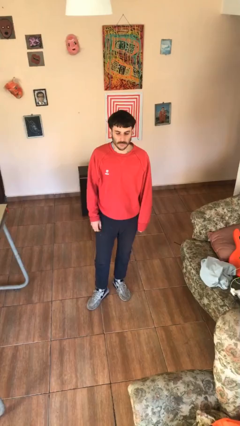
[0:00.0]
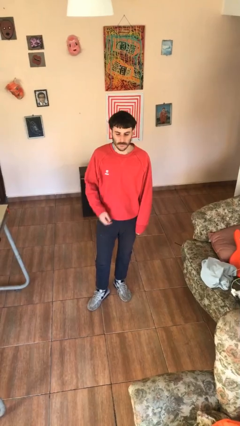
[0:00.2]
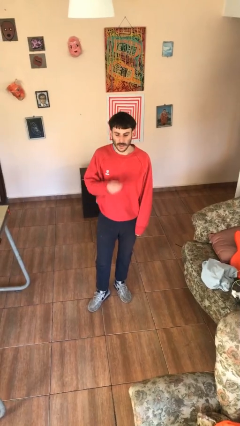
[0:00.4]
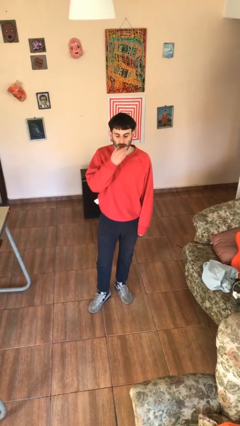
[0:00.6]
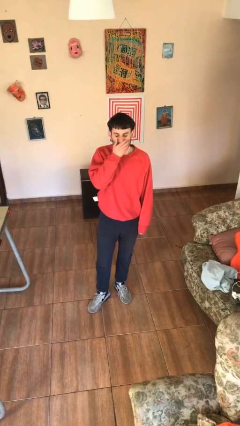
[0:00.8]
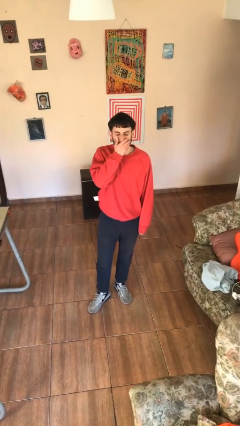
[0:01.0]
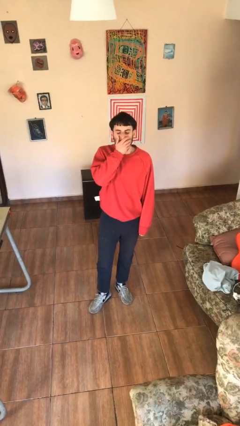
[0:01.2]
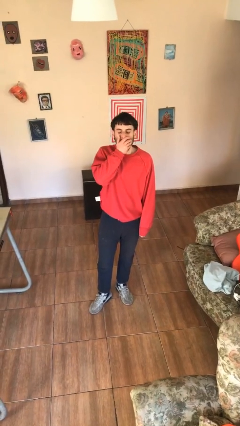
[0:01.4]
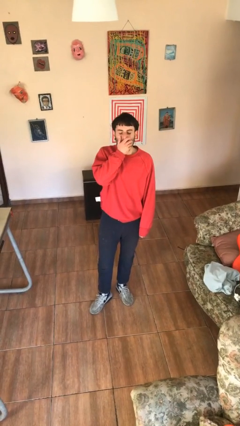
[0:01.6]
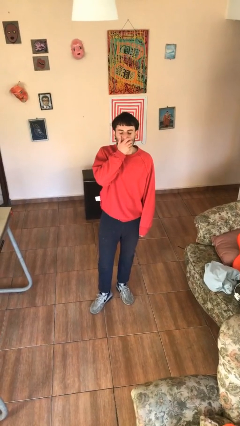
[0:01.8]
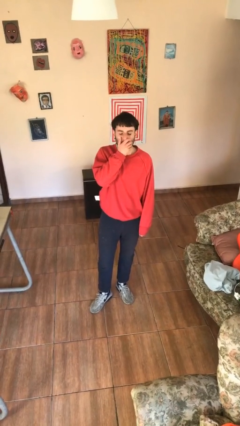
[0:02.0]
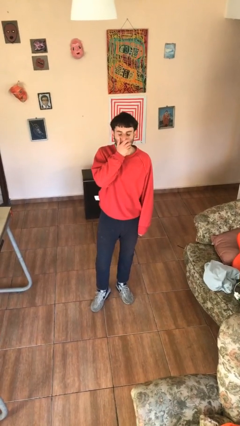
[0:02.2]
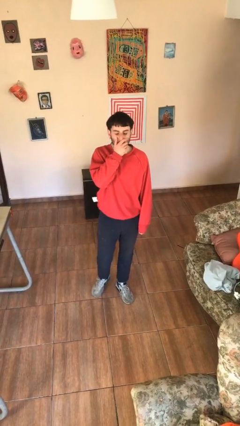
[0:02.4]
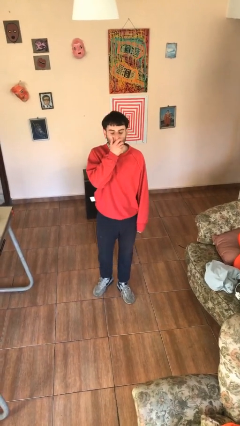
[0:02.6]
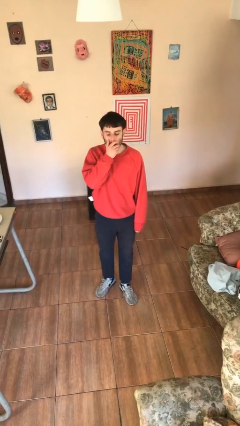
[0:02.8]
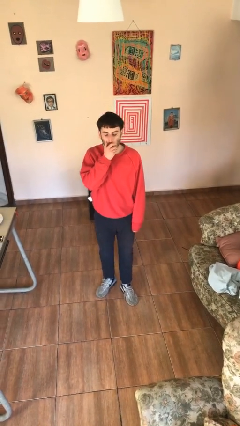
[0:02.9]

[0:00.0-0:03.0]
person yawns

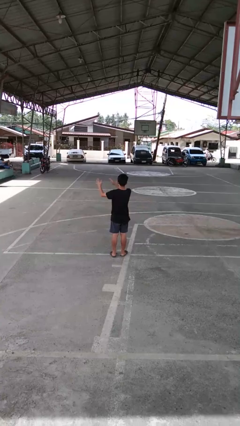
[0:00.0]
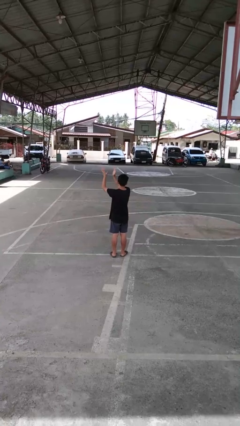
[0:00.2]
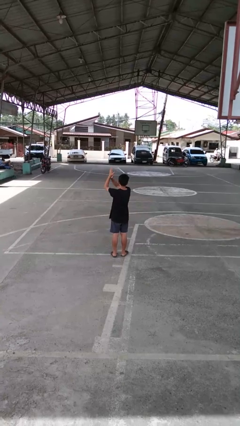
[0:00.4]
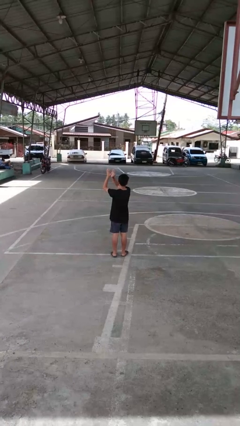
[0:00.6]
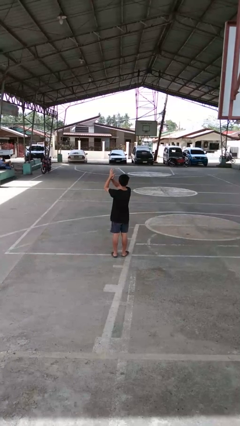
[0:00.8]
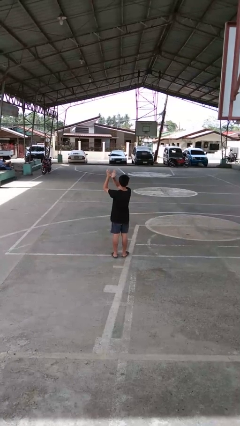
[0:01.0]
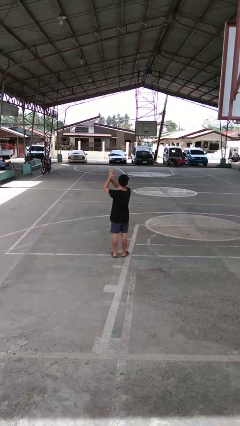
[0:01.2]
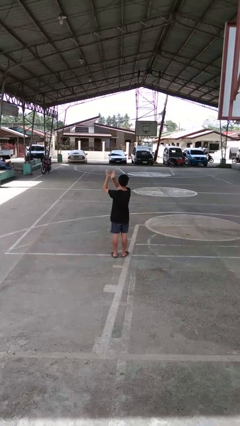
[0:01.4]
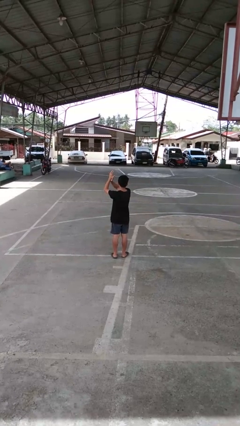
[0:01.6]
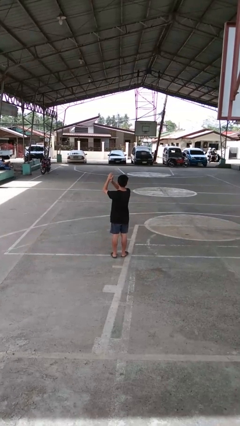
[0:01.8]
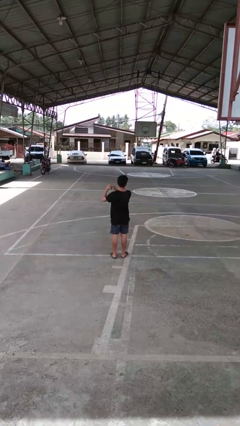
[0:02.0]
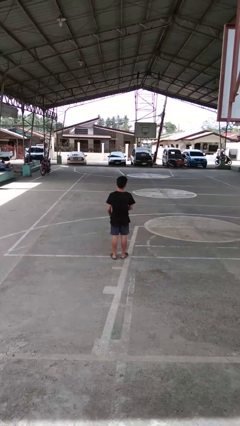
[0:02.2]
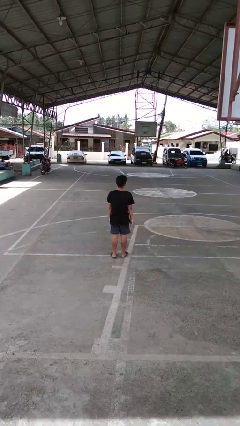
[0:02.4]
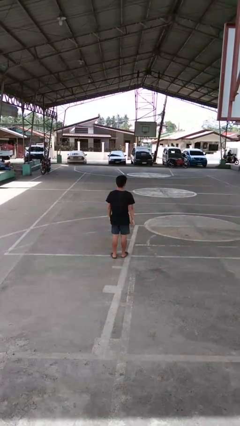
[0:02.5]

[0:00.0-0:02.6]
person claps hands

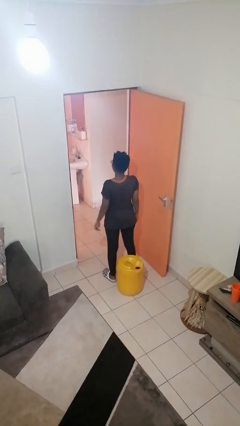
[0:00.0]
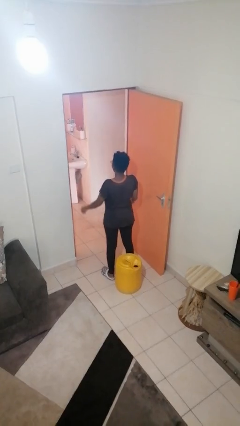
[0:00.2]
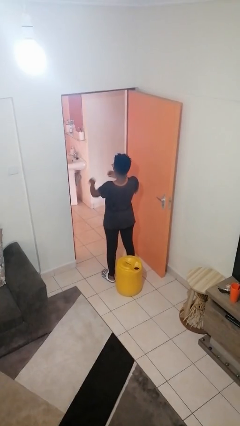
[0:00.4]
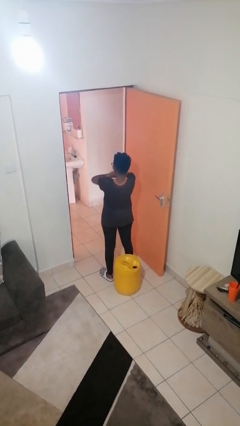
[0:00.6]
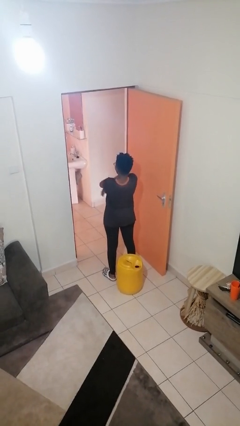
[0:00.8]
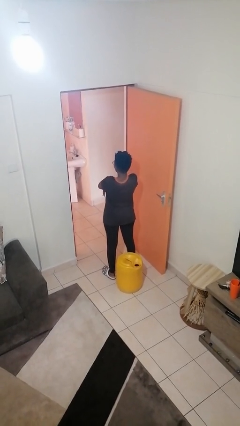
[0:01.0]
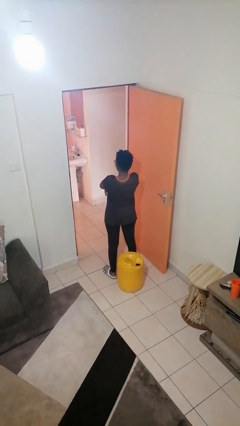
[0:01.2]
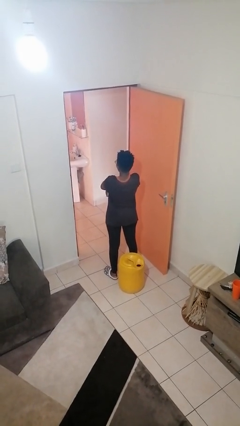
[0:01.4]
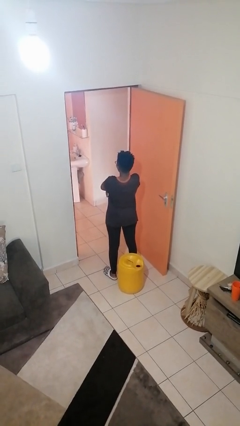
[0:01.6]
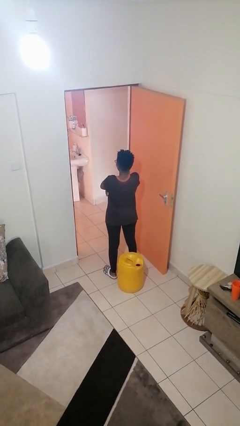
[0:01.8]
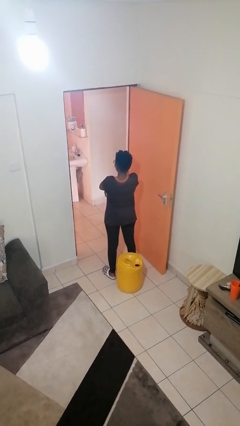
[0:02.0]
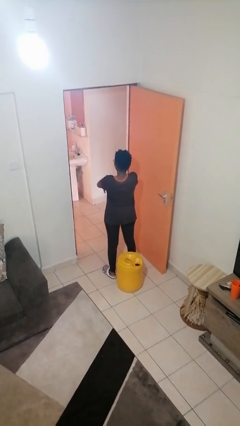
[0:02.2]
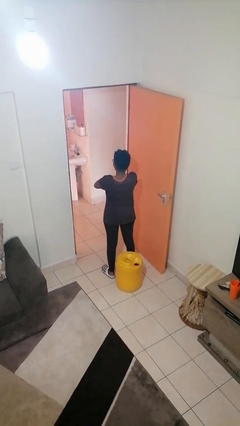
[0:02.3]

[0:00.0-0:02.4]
person crosses arms

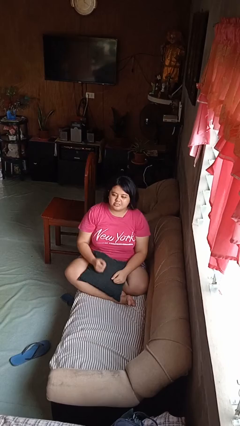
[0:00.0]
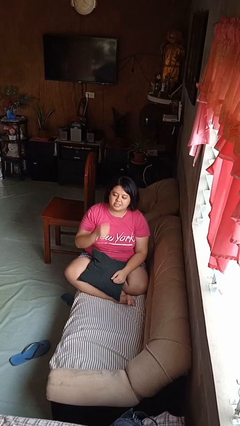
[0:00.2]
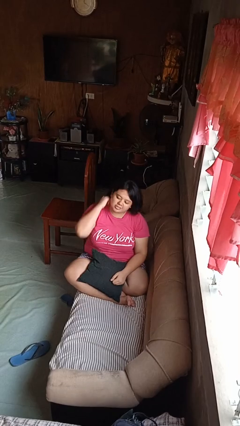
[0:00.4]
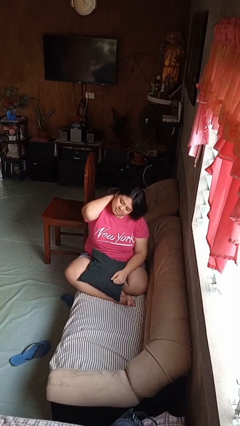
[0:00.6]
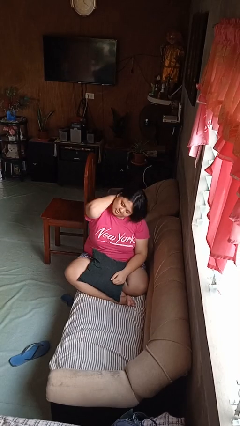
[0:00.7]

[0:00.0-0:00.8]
person rubs neck

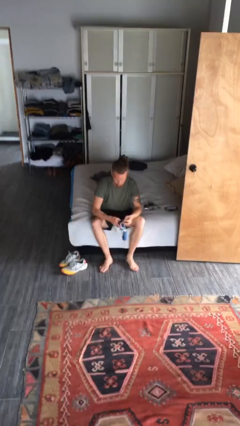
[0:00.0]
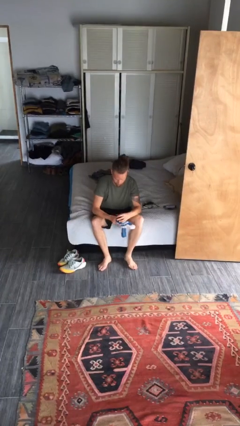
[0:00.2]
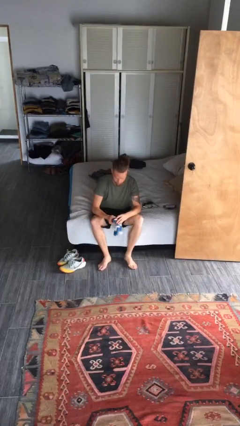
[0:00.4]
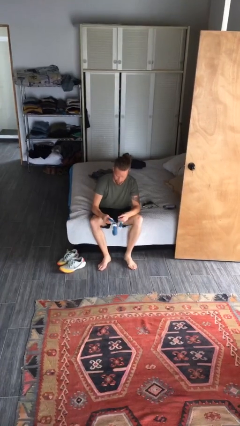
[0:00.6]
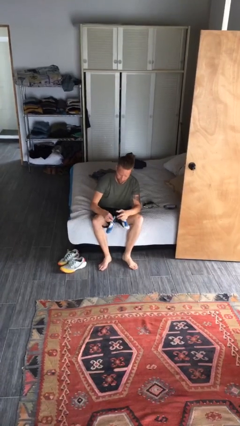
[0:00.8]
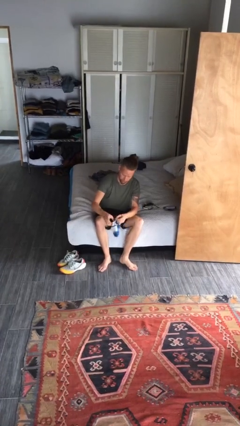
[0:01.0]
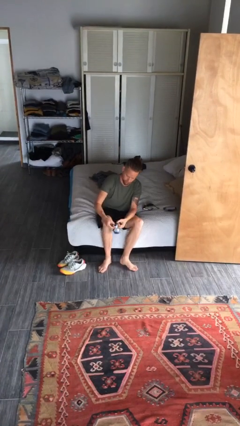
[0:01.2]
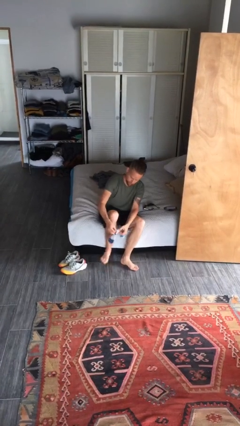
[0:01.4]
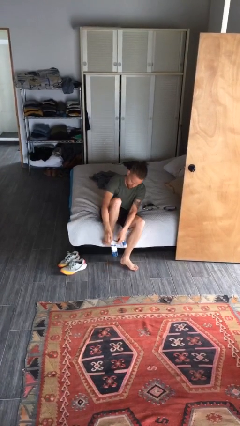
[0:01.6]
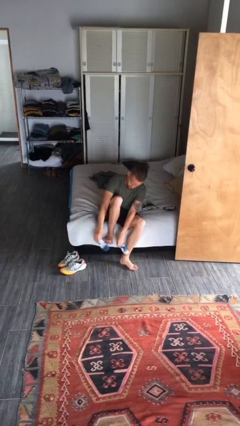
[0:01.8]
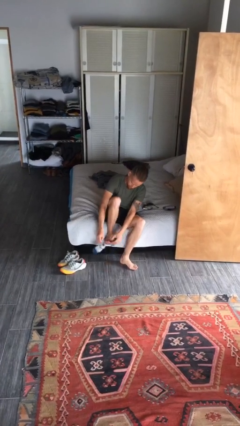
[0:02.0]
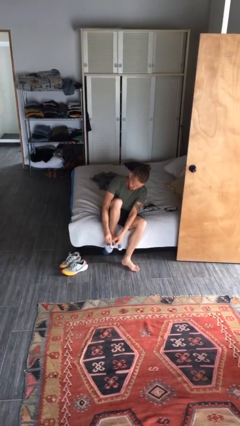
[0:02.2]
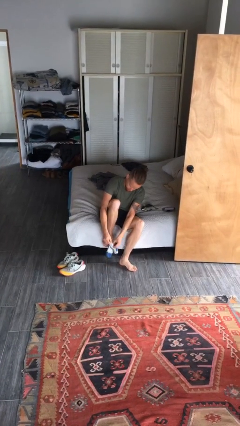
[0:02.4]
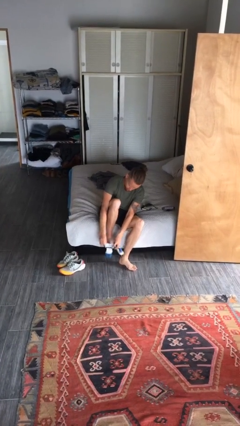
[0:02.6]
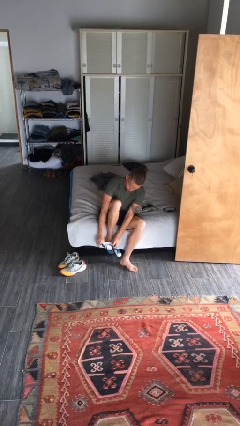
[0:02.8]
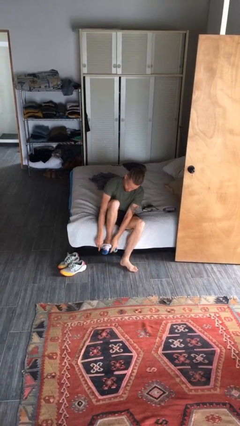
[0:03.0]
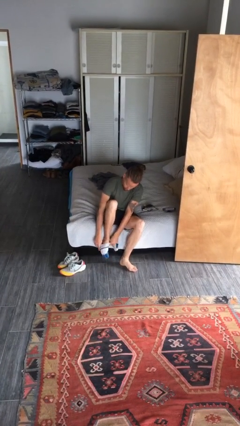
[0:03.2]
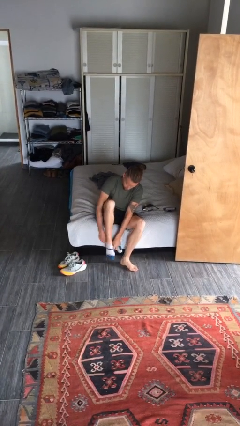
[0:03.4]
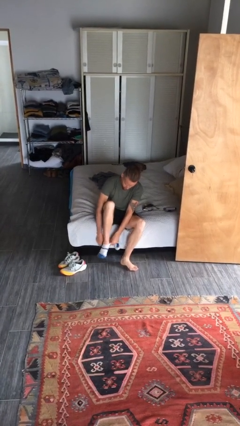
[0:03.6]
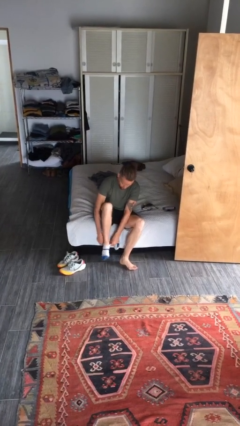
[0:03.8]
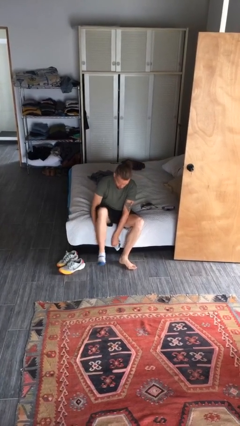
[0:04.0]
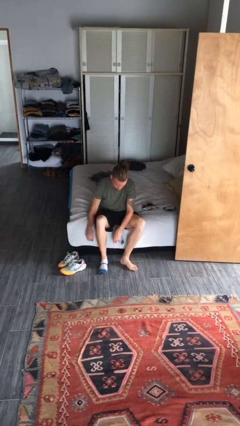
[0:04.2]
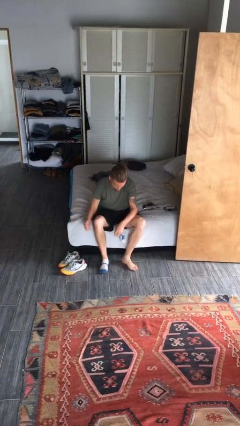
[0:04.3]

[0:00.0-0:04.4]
person puts on socks

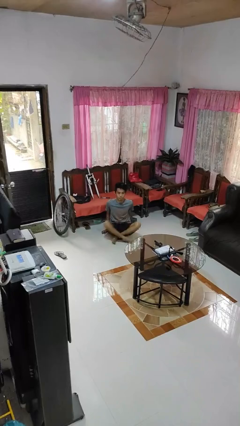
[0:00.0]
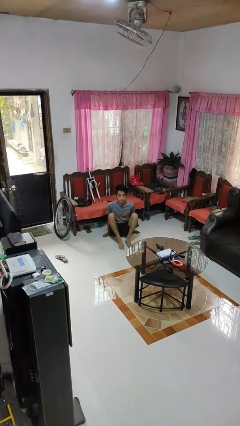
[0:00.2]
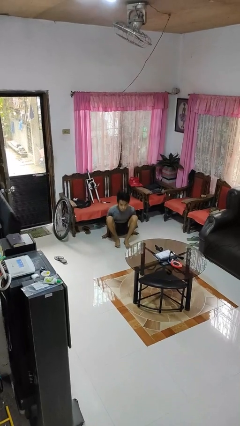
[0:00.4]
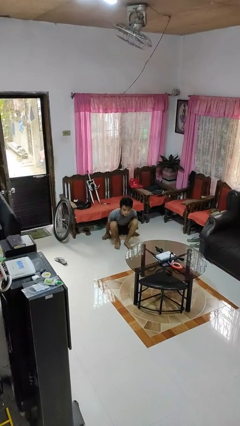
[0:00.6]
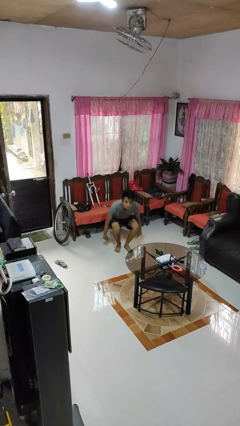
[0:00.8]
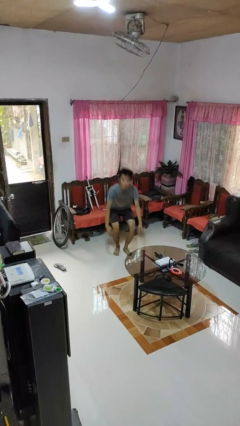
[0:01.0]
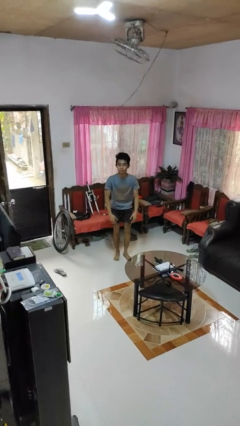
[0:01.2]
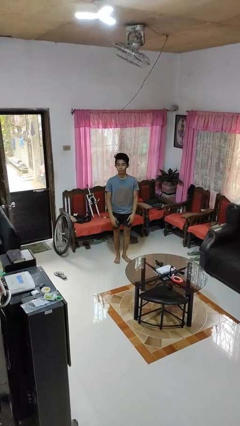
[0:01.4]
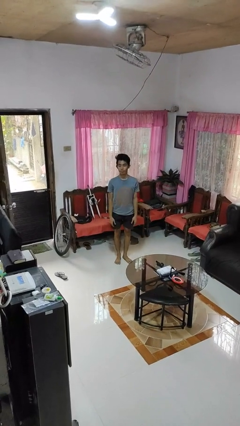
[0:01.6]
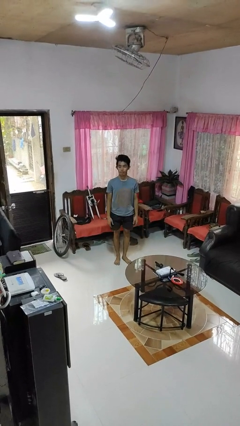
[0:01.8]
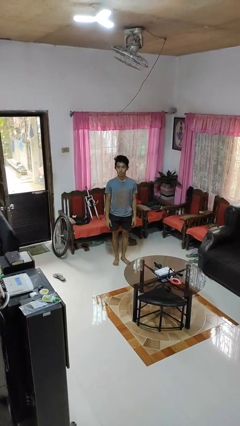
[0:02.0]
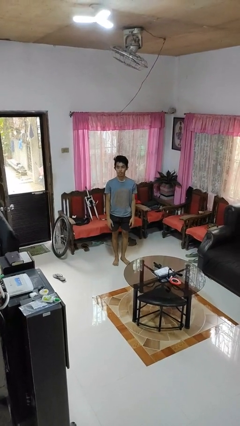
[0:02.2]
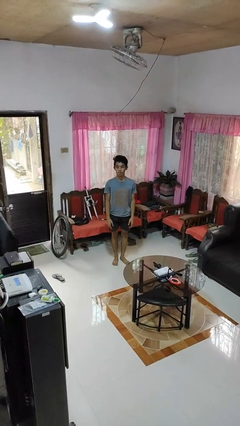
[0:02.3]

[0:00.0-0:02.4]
person stands up from floor

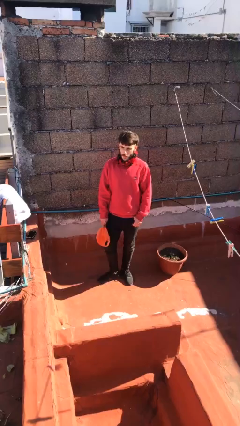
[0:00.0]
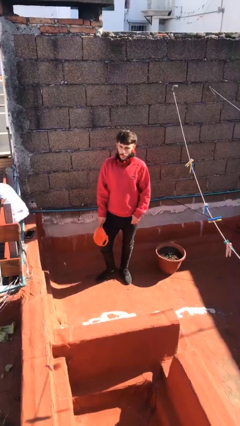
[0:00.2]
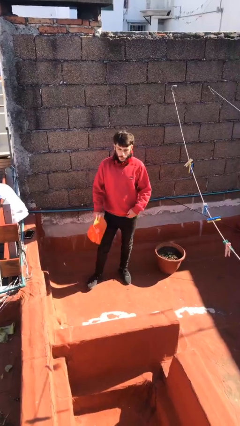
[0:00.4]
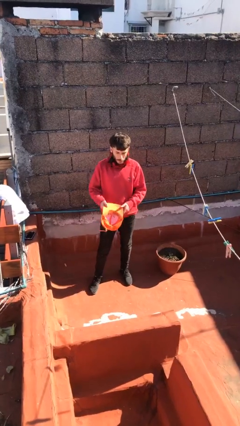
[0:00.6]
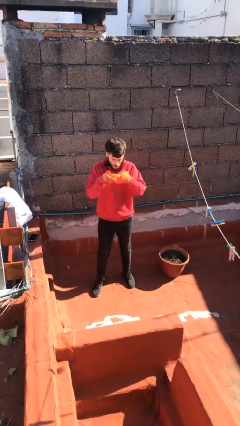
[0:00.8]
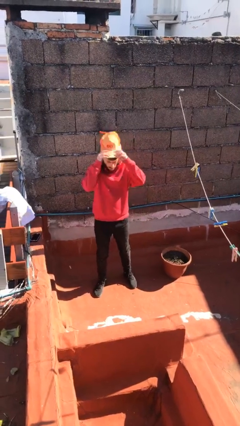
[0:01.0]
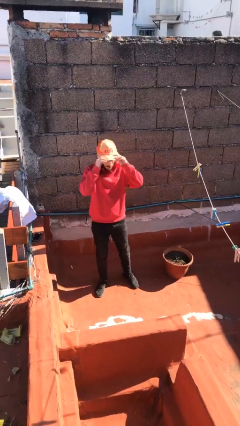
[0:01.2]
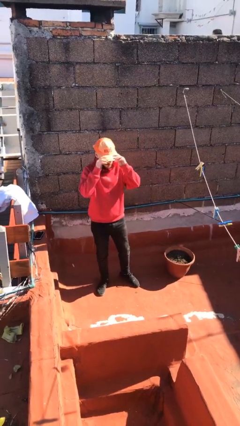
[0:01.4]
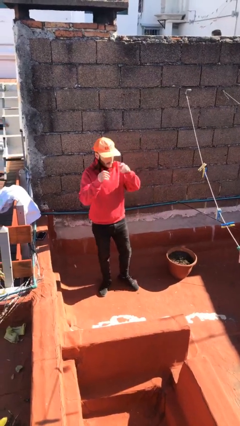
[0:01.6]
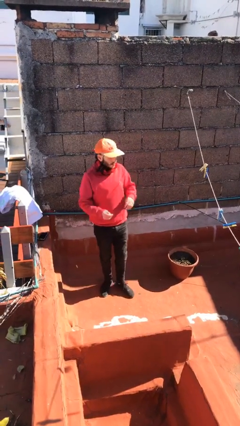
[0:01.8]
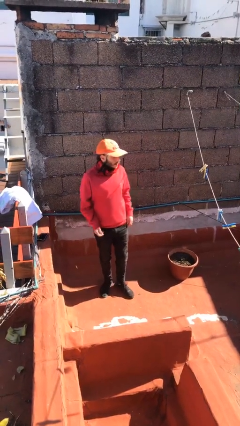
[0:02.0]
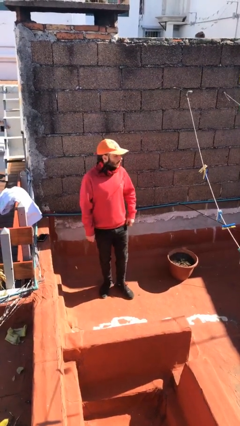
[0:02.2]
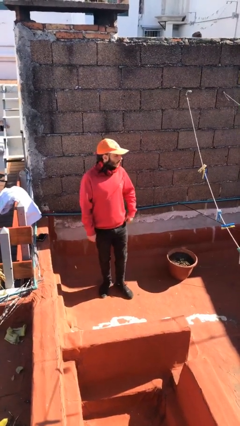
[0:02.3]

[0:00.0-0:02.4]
person puts on hat
